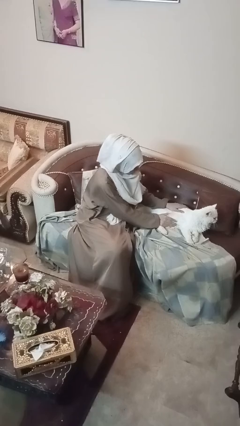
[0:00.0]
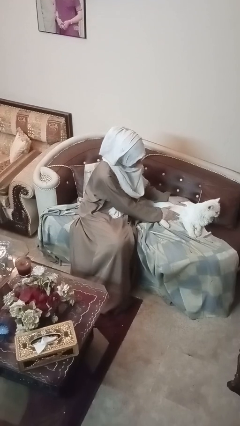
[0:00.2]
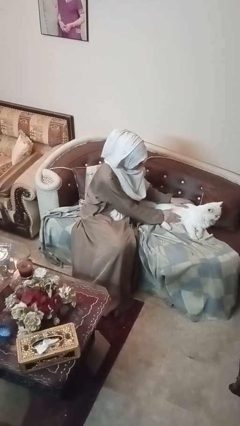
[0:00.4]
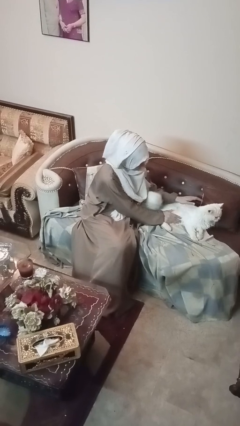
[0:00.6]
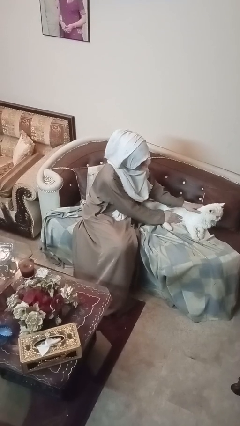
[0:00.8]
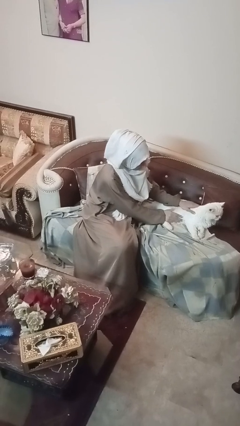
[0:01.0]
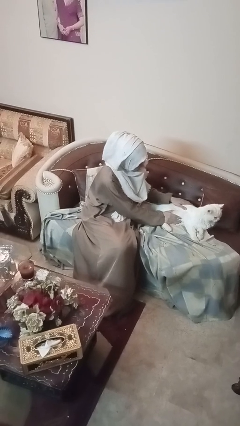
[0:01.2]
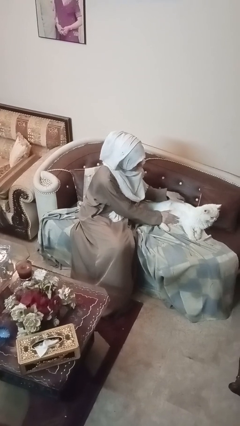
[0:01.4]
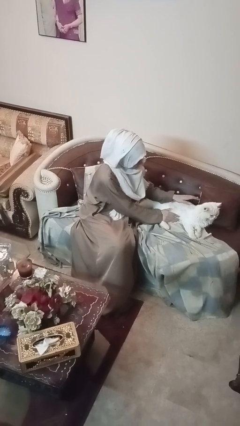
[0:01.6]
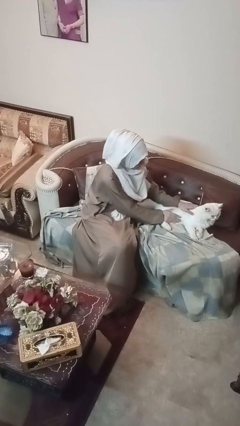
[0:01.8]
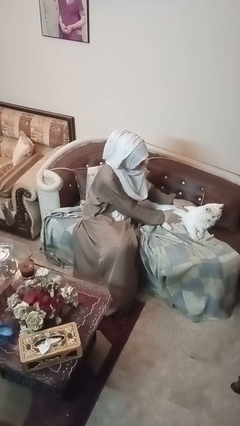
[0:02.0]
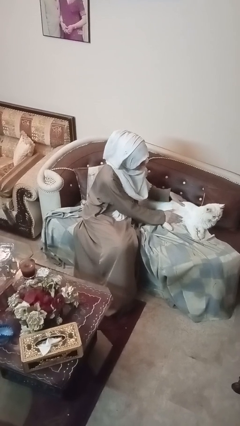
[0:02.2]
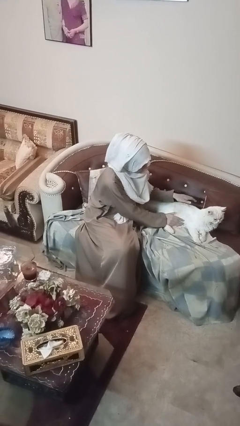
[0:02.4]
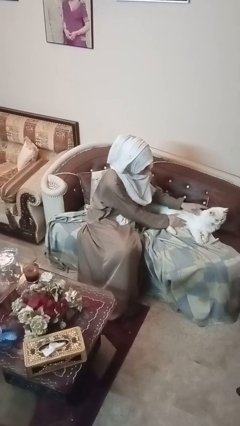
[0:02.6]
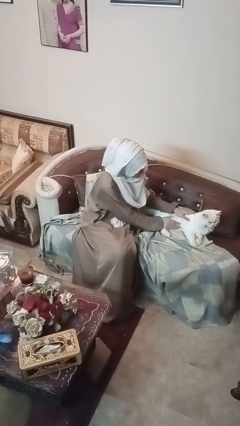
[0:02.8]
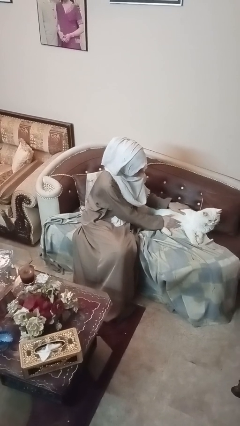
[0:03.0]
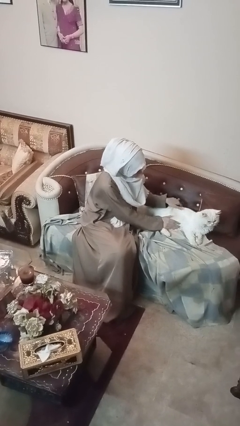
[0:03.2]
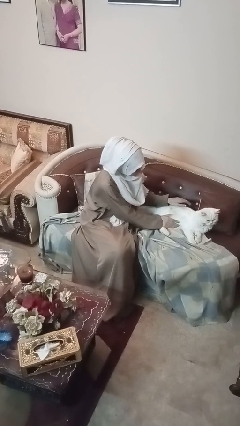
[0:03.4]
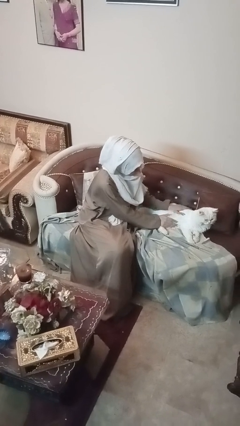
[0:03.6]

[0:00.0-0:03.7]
person pets cat

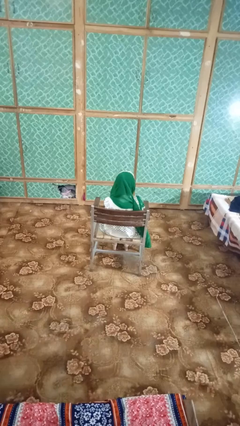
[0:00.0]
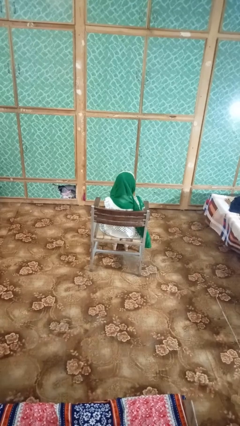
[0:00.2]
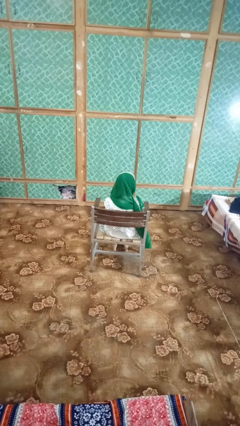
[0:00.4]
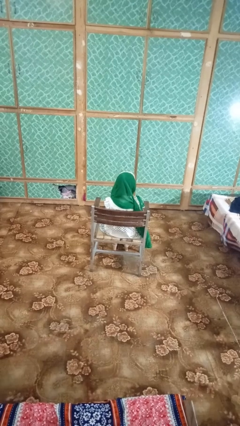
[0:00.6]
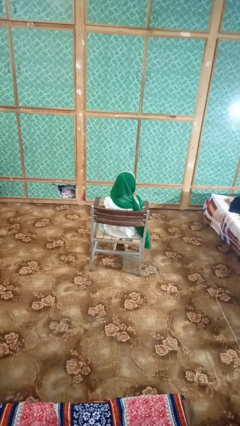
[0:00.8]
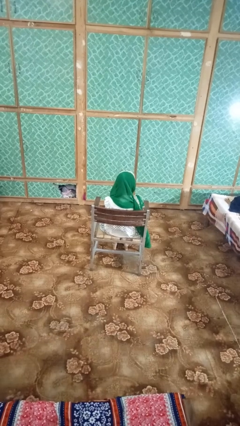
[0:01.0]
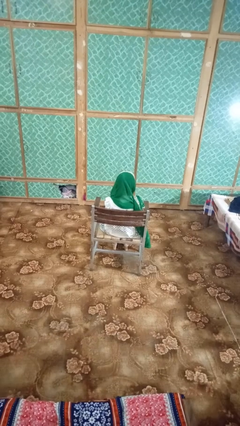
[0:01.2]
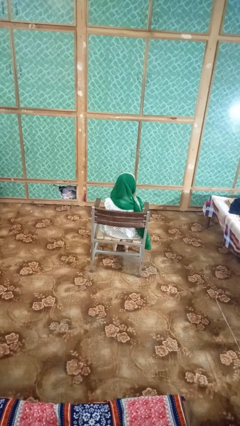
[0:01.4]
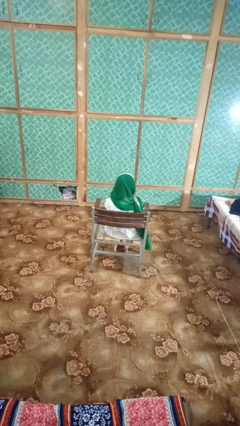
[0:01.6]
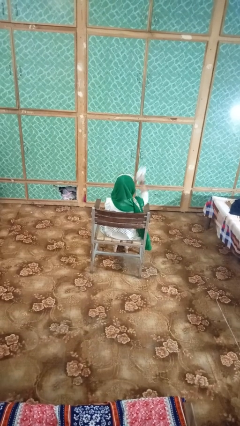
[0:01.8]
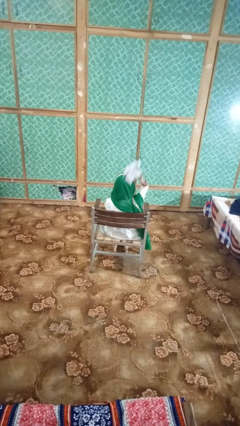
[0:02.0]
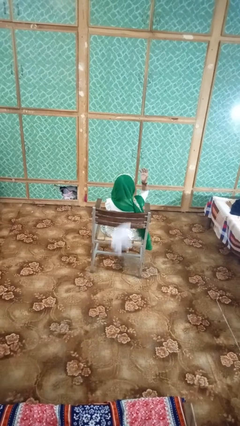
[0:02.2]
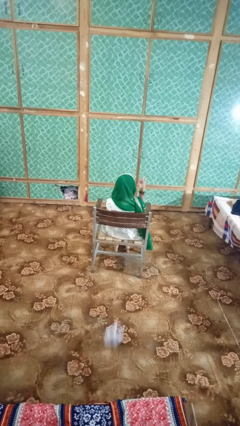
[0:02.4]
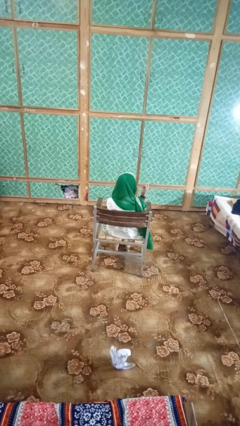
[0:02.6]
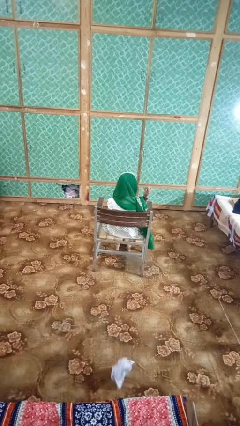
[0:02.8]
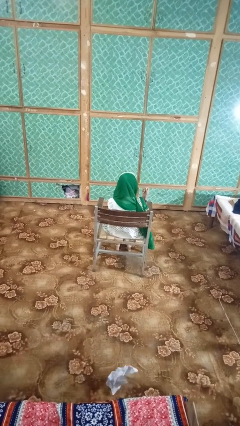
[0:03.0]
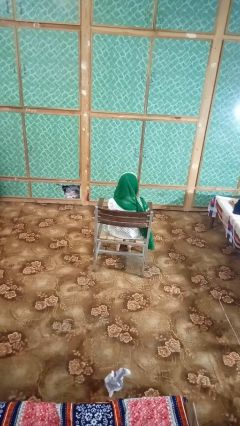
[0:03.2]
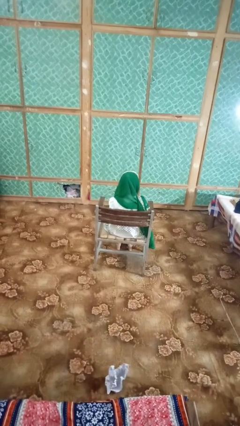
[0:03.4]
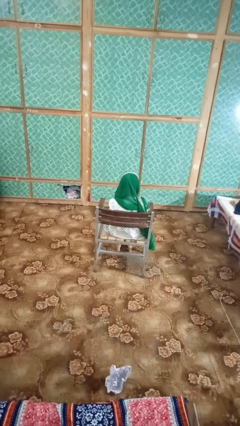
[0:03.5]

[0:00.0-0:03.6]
person crumples paper

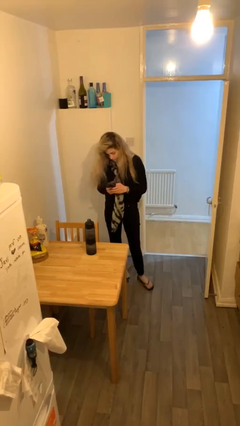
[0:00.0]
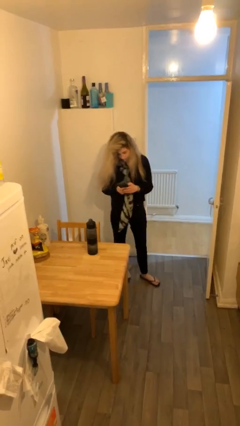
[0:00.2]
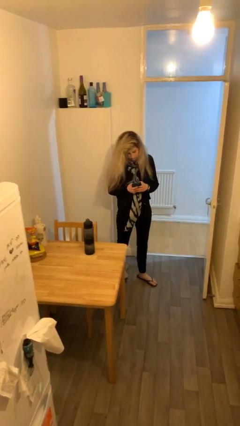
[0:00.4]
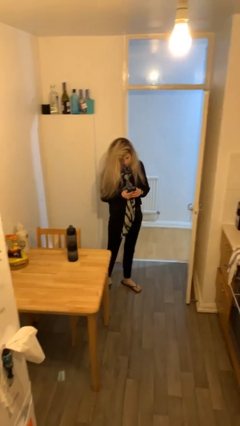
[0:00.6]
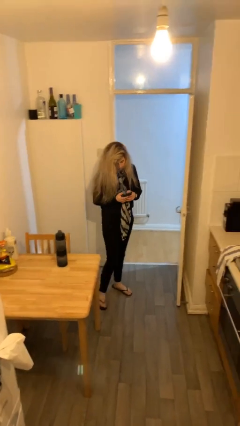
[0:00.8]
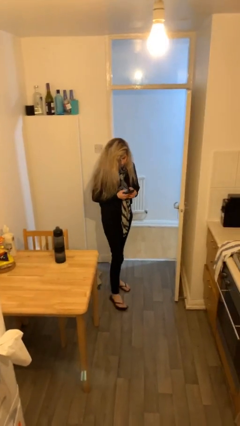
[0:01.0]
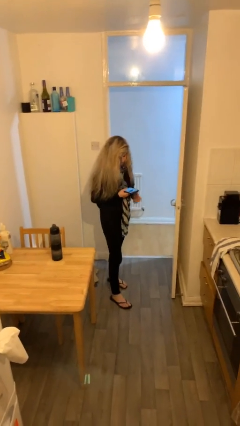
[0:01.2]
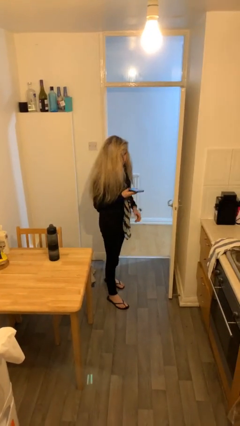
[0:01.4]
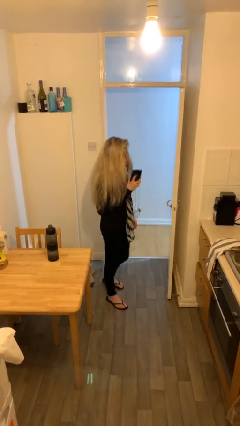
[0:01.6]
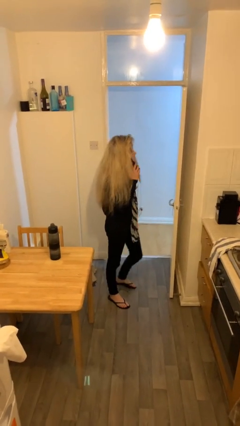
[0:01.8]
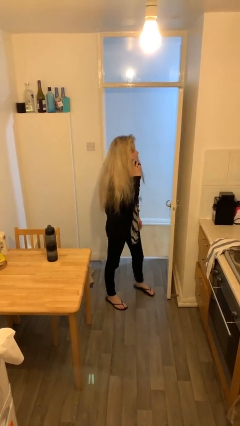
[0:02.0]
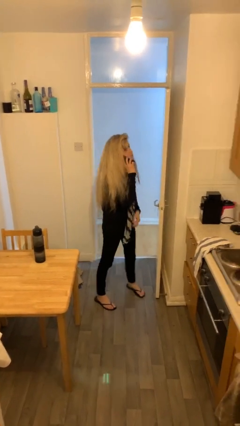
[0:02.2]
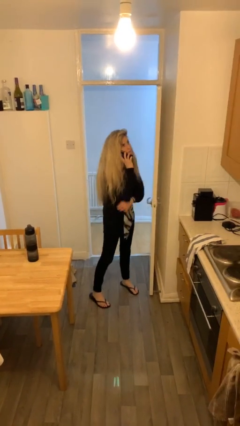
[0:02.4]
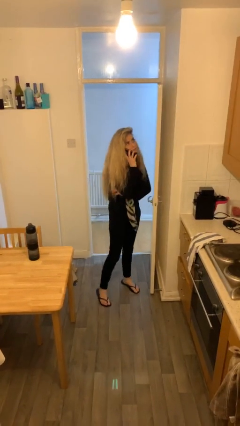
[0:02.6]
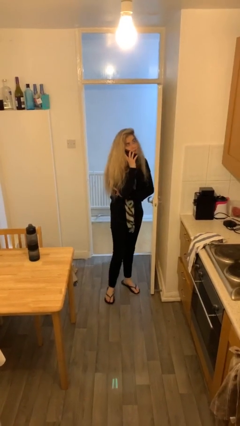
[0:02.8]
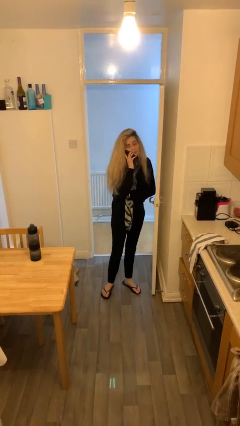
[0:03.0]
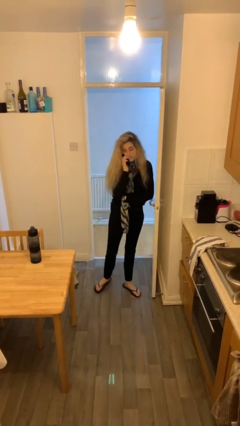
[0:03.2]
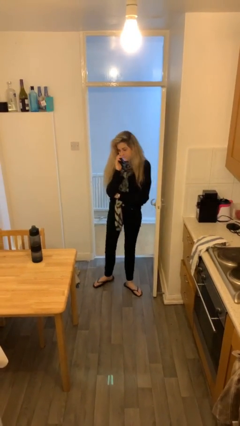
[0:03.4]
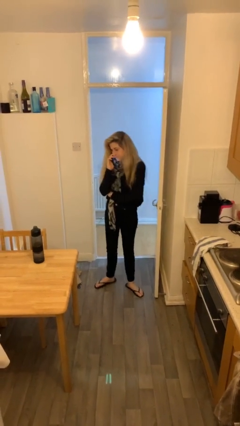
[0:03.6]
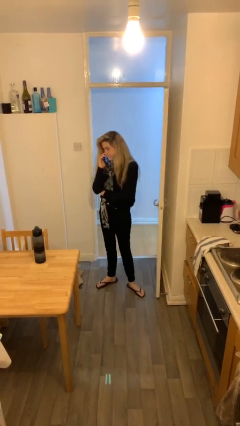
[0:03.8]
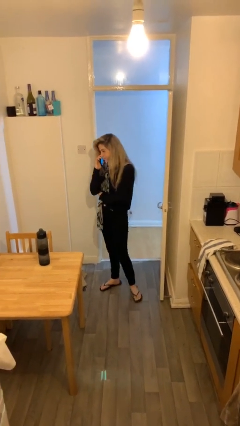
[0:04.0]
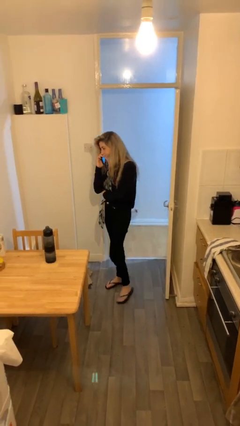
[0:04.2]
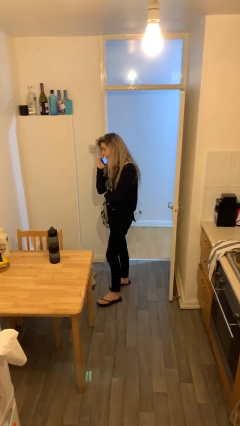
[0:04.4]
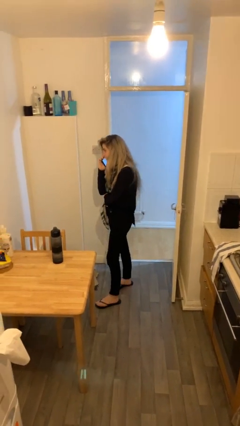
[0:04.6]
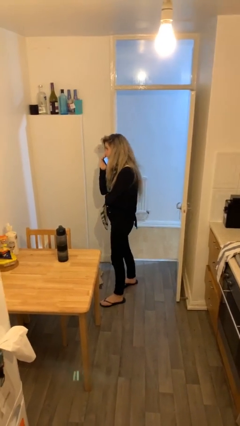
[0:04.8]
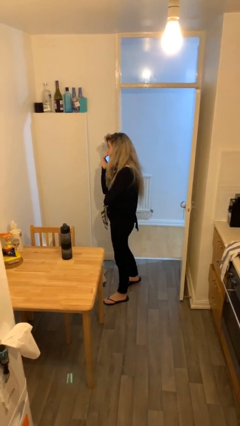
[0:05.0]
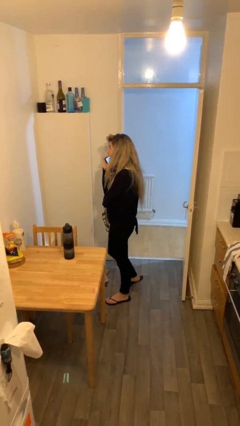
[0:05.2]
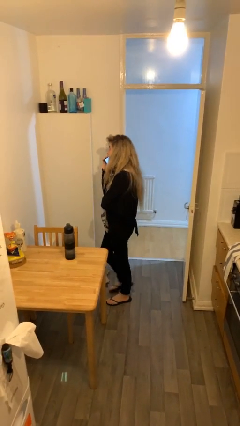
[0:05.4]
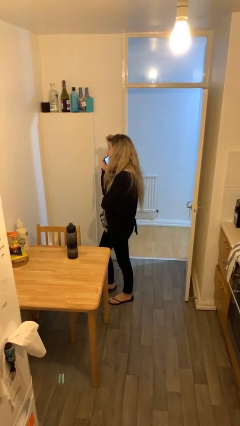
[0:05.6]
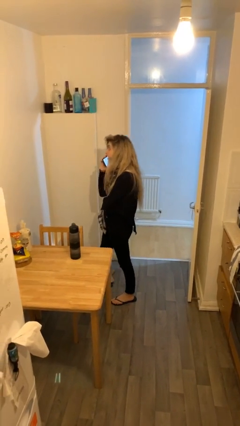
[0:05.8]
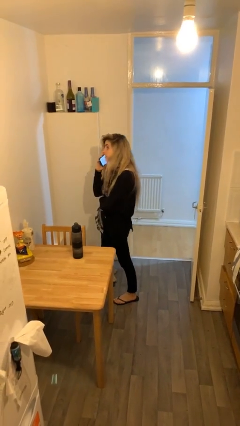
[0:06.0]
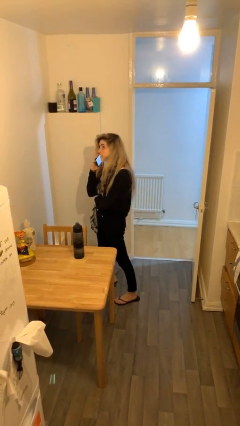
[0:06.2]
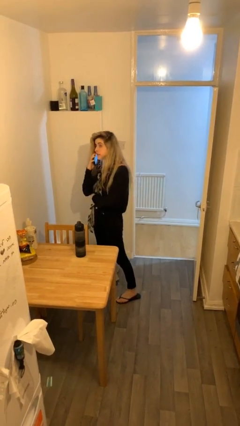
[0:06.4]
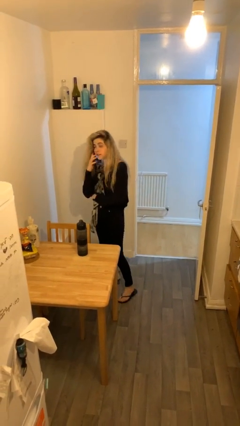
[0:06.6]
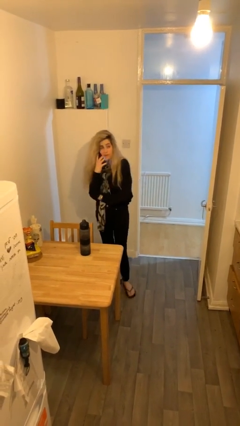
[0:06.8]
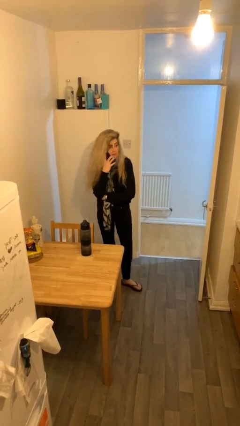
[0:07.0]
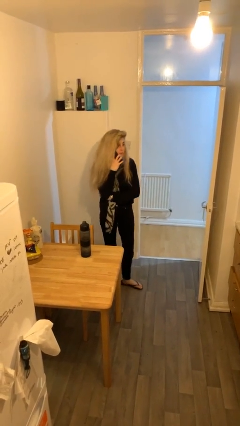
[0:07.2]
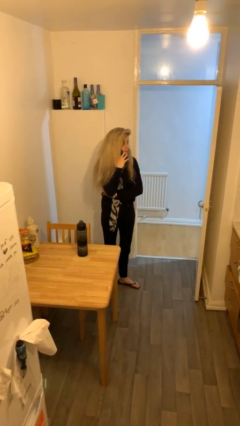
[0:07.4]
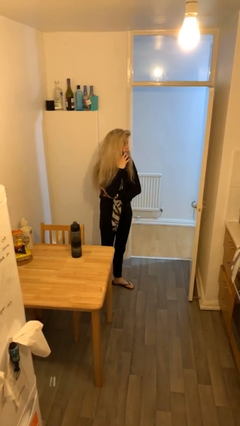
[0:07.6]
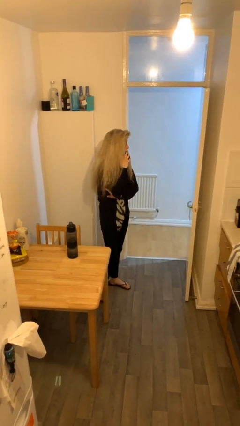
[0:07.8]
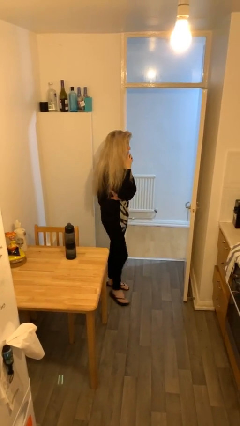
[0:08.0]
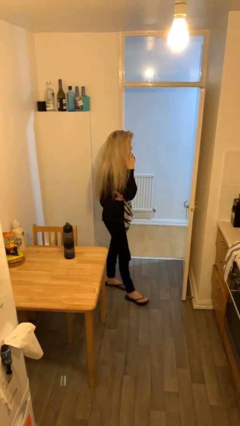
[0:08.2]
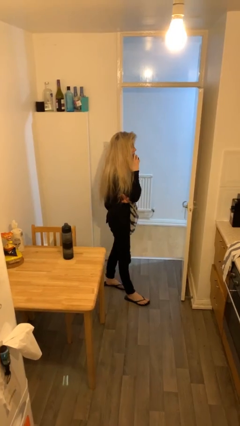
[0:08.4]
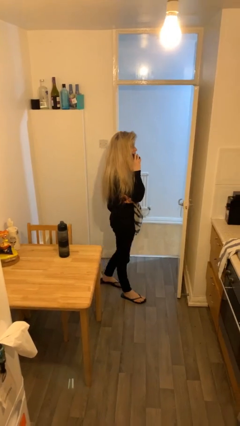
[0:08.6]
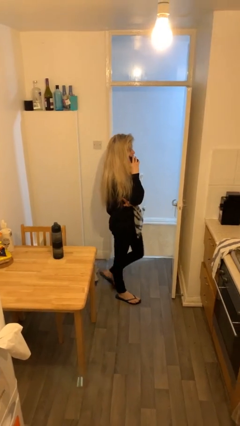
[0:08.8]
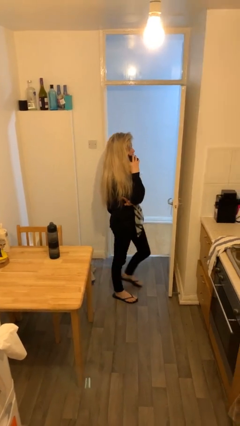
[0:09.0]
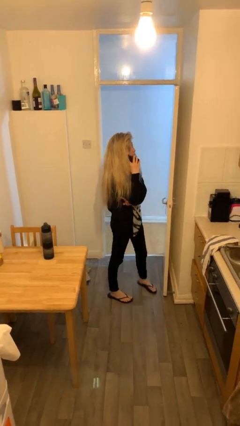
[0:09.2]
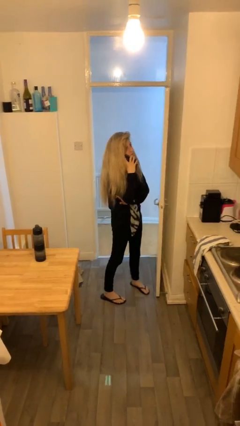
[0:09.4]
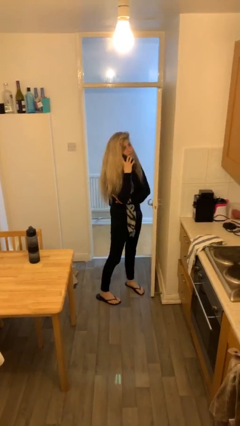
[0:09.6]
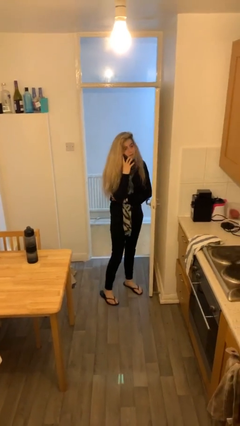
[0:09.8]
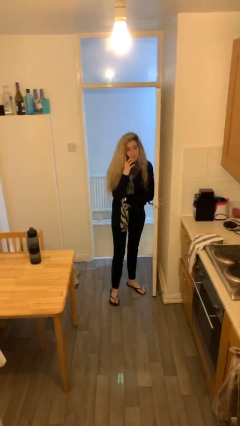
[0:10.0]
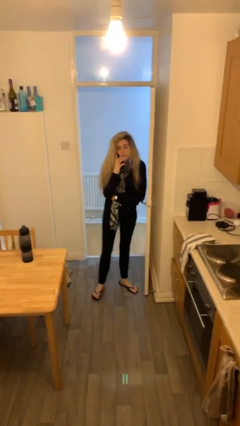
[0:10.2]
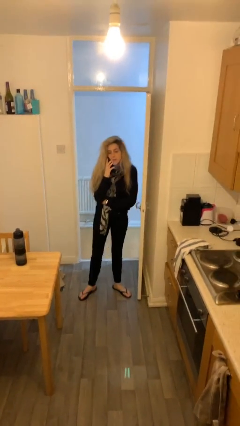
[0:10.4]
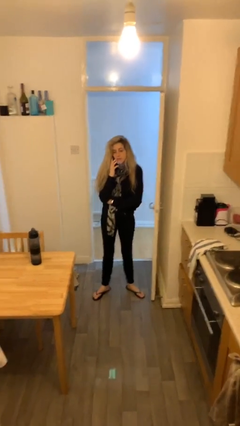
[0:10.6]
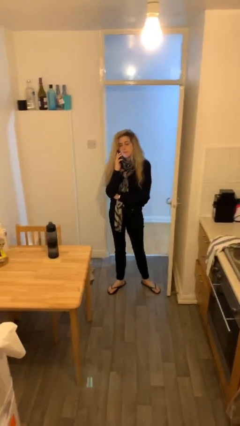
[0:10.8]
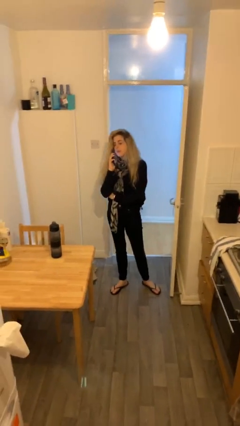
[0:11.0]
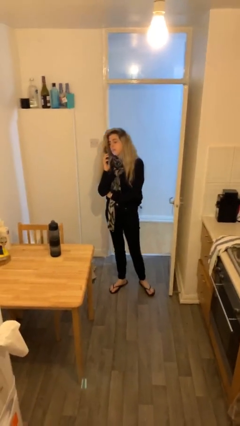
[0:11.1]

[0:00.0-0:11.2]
person talks on phone
